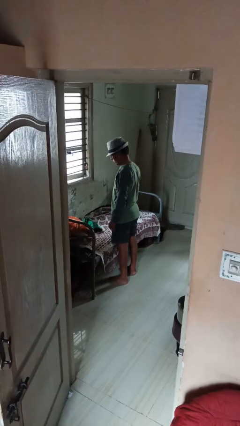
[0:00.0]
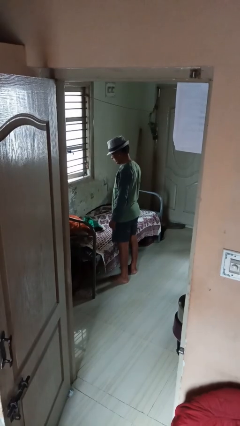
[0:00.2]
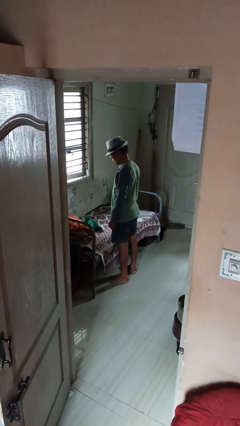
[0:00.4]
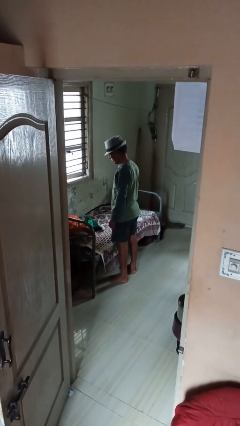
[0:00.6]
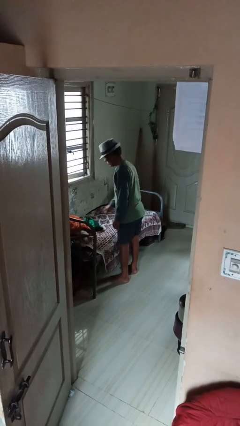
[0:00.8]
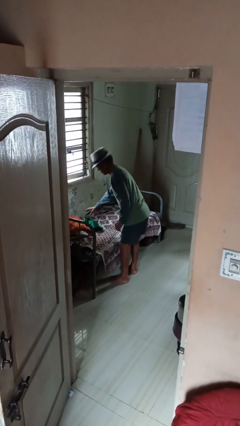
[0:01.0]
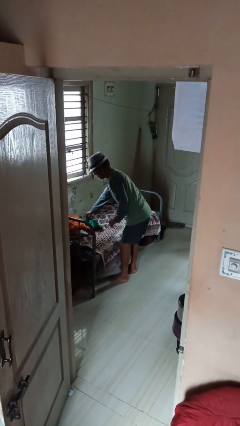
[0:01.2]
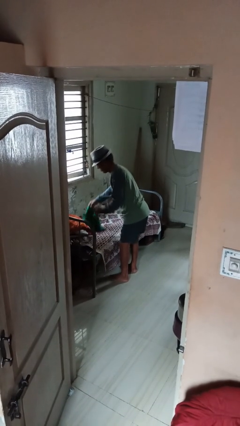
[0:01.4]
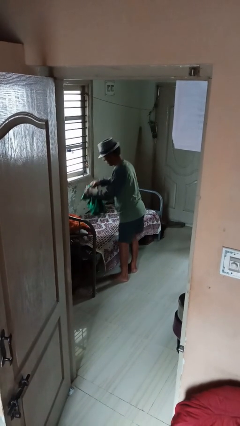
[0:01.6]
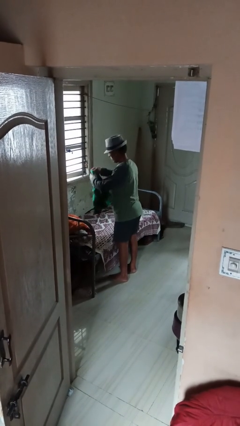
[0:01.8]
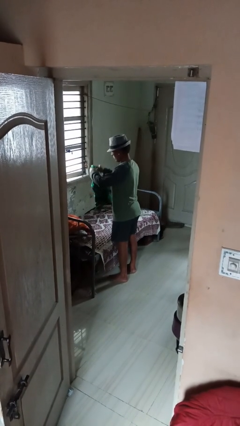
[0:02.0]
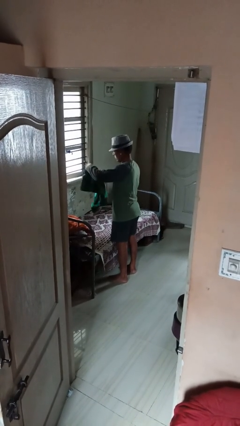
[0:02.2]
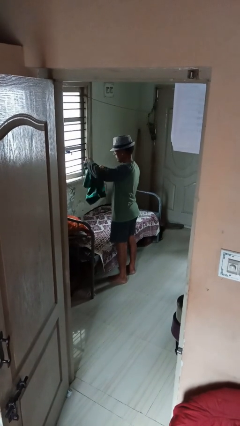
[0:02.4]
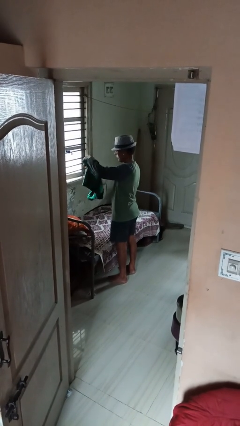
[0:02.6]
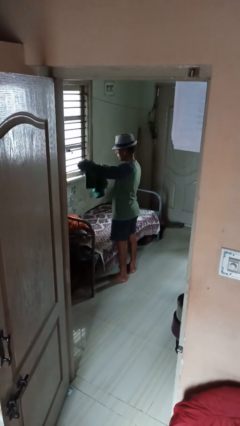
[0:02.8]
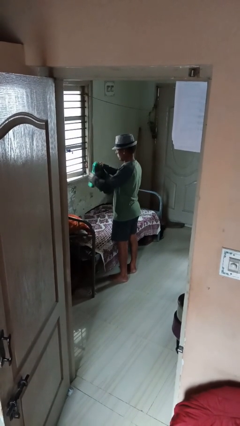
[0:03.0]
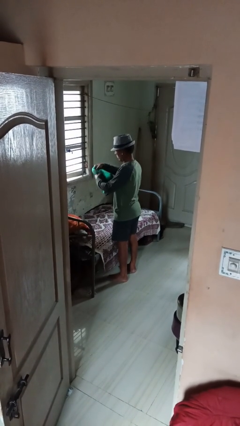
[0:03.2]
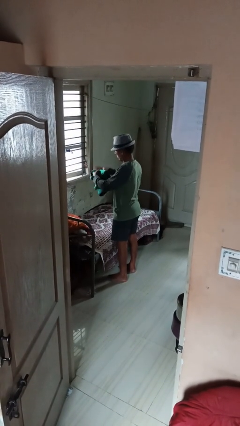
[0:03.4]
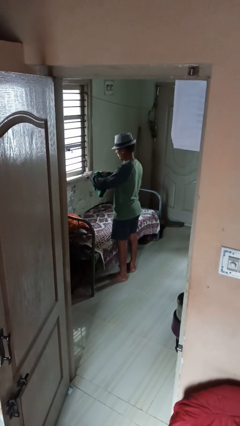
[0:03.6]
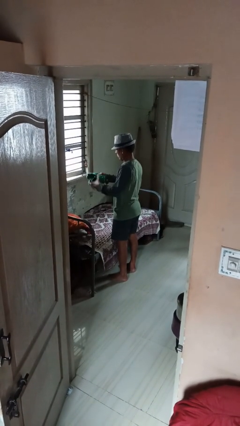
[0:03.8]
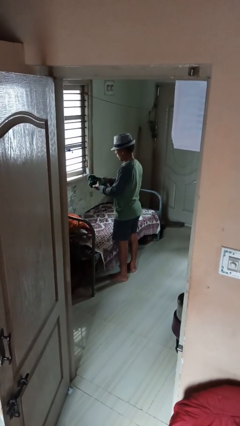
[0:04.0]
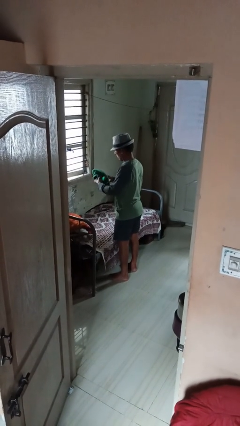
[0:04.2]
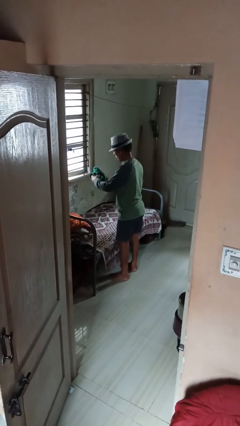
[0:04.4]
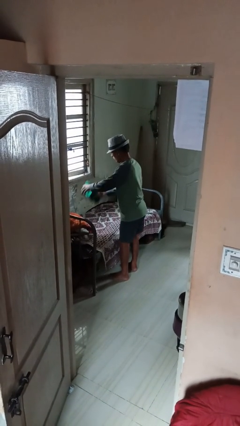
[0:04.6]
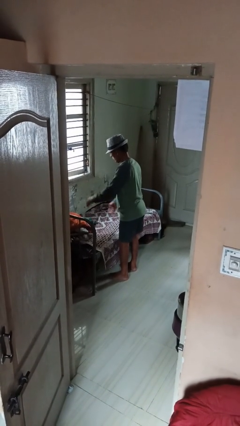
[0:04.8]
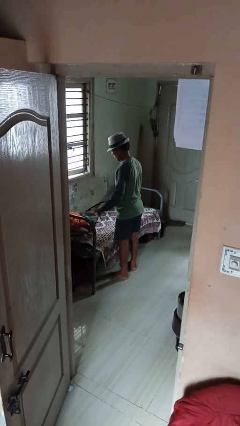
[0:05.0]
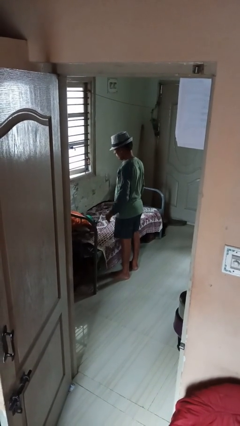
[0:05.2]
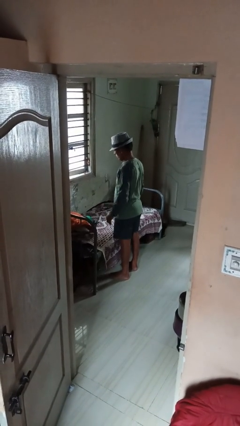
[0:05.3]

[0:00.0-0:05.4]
person folds shirt

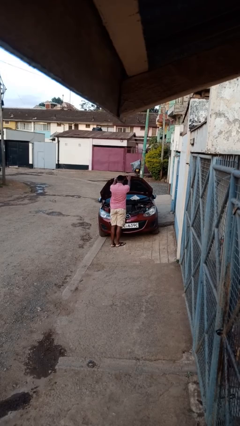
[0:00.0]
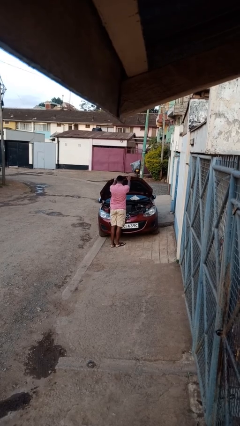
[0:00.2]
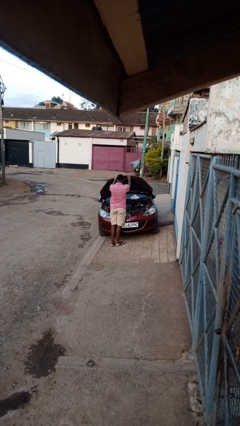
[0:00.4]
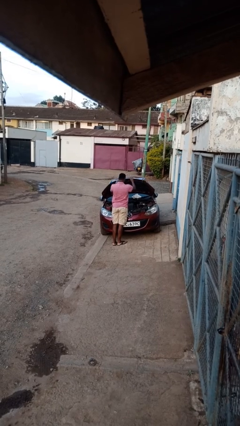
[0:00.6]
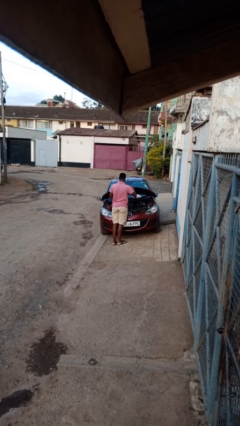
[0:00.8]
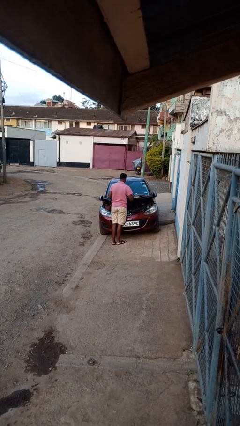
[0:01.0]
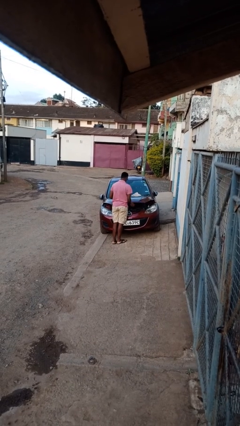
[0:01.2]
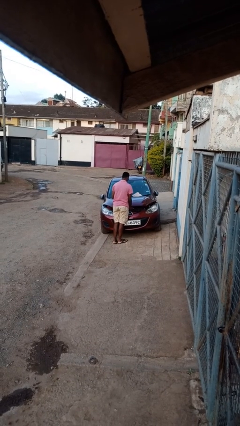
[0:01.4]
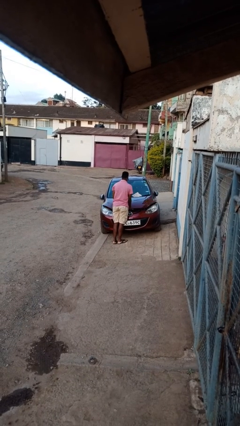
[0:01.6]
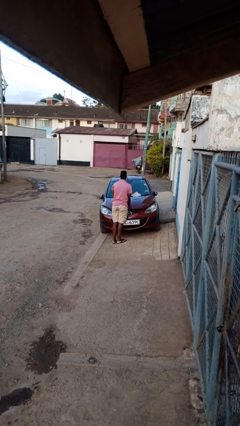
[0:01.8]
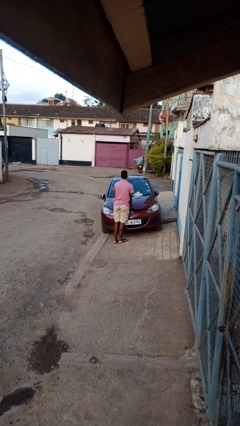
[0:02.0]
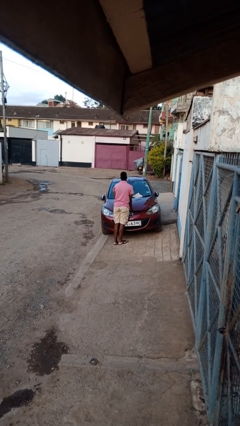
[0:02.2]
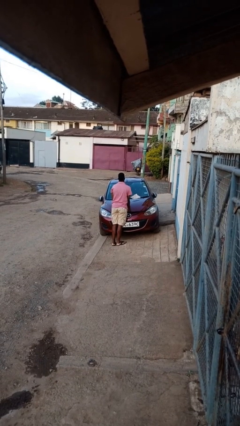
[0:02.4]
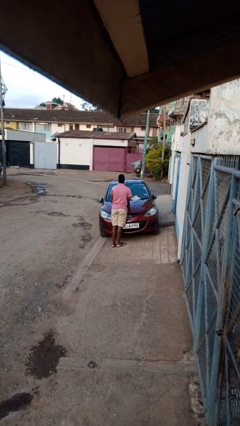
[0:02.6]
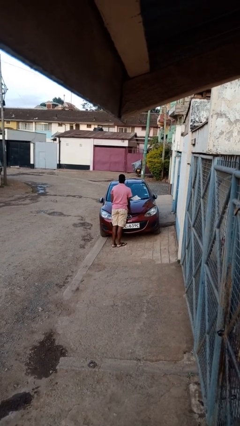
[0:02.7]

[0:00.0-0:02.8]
person closes car hood

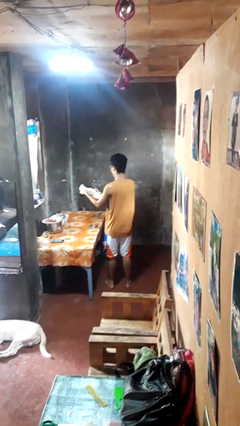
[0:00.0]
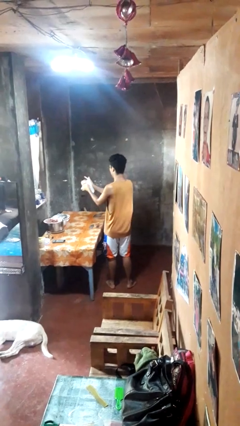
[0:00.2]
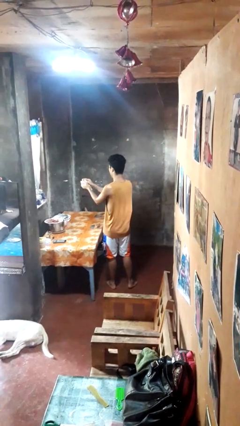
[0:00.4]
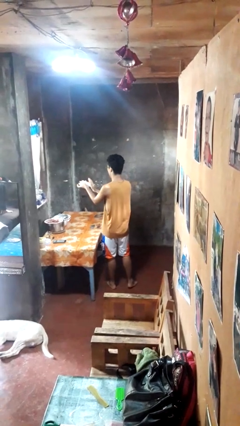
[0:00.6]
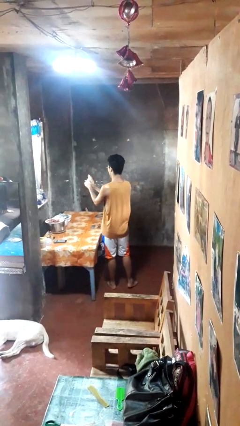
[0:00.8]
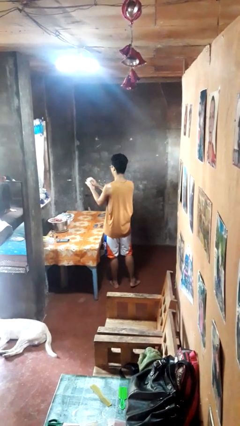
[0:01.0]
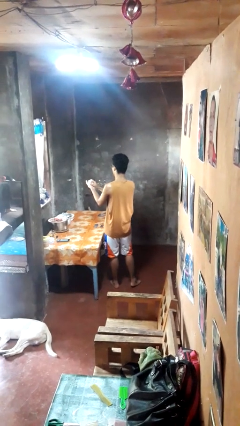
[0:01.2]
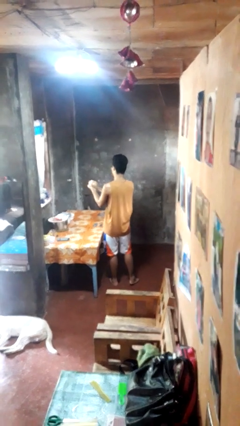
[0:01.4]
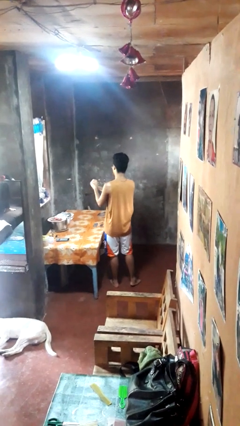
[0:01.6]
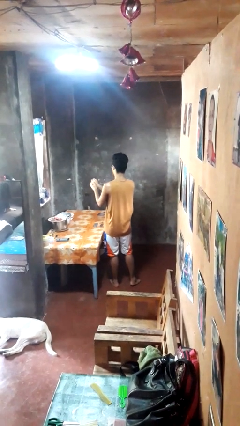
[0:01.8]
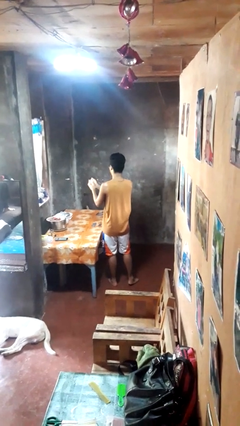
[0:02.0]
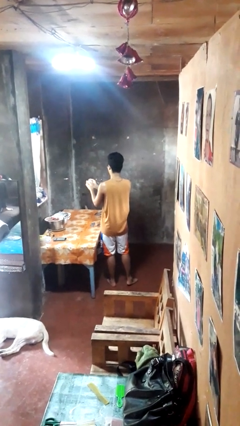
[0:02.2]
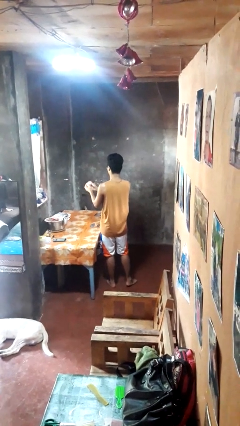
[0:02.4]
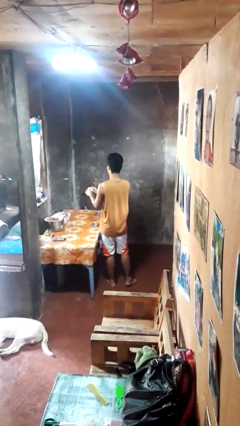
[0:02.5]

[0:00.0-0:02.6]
person crumples paper

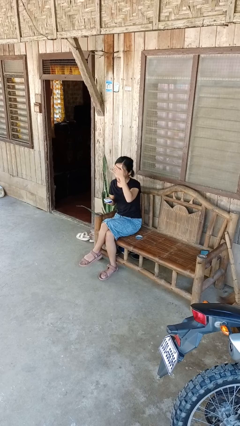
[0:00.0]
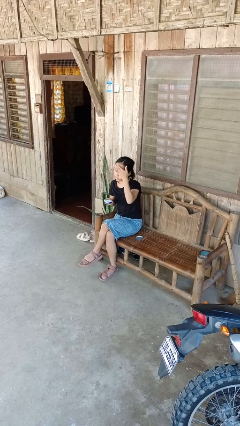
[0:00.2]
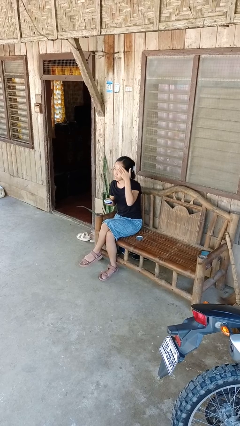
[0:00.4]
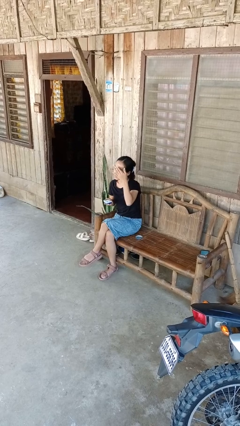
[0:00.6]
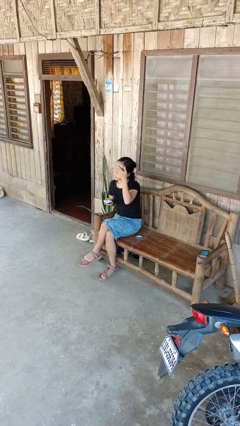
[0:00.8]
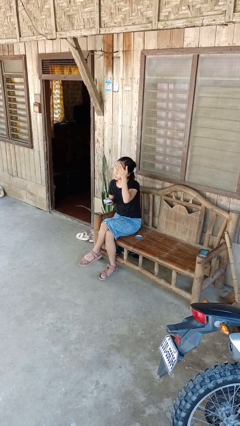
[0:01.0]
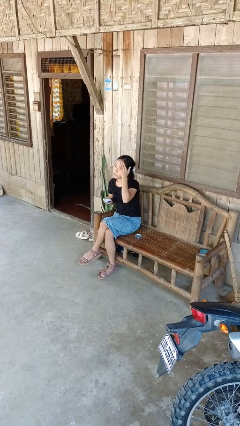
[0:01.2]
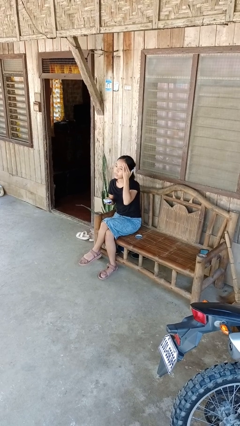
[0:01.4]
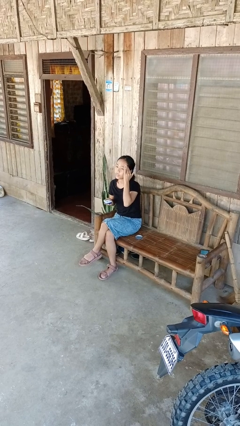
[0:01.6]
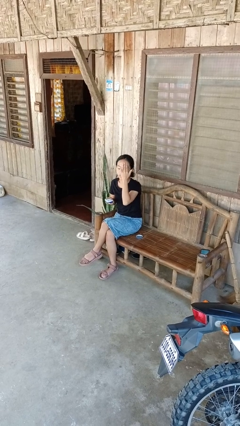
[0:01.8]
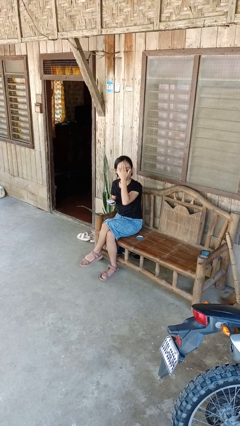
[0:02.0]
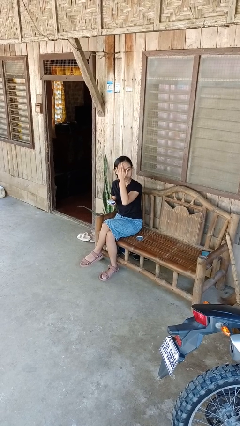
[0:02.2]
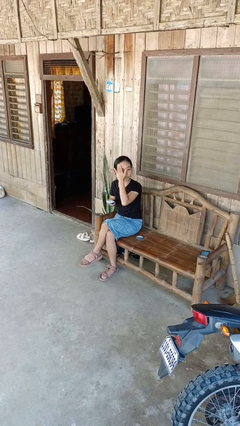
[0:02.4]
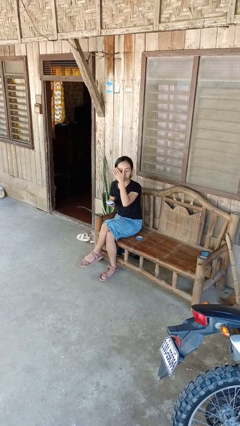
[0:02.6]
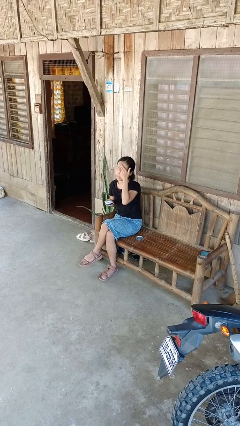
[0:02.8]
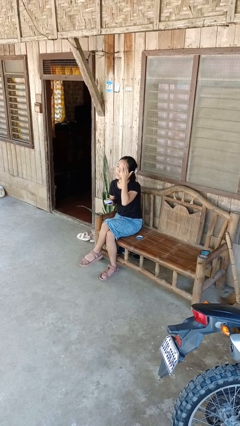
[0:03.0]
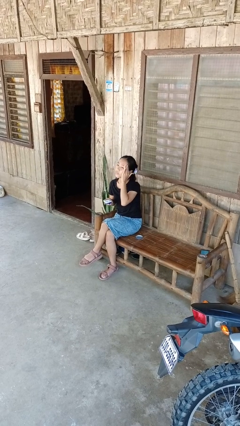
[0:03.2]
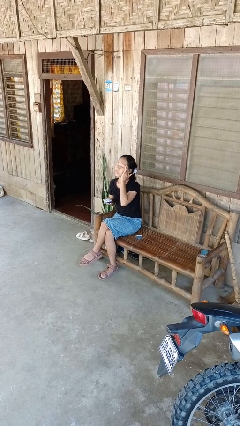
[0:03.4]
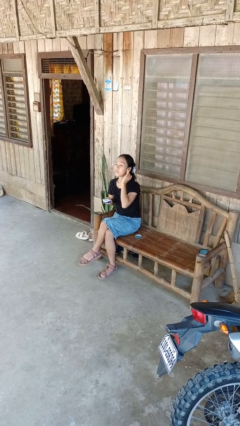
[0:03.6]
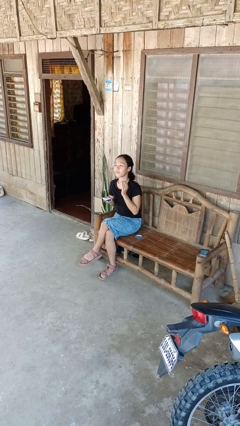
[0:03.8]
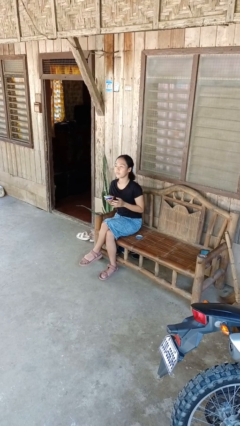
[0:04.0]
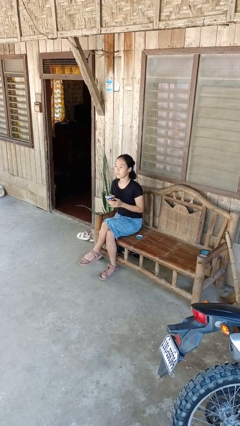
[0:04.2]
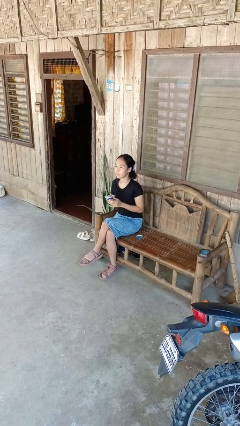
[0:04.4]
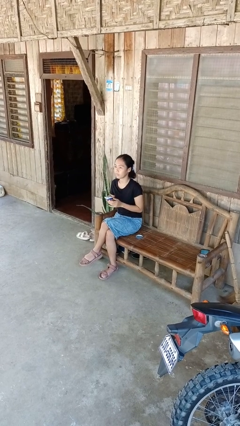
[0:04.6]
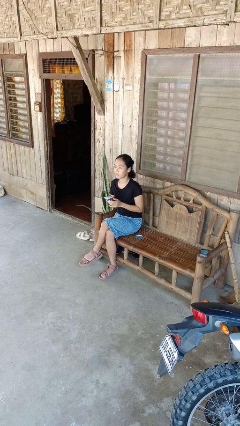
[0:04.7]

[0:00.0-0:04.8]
person applies facial moisturizer

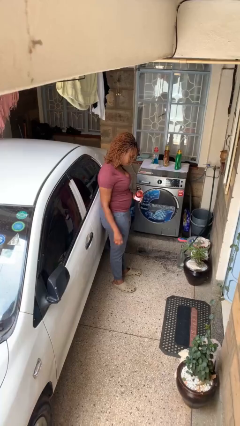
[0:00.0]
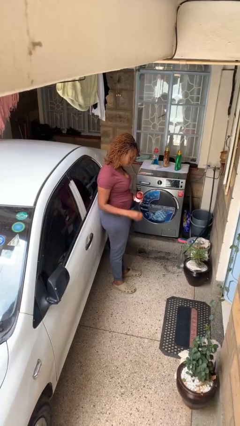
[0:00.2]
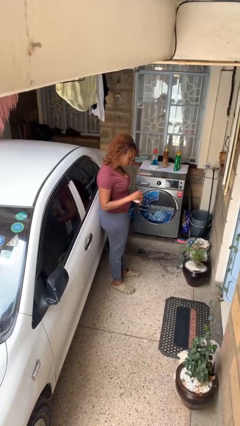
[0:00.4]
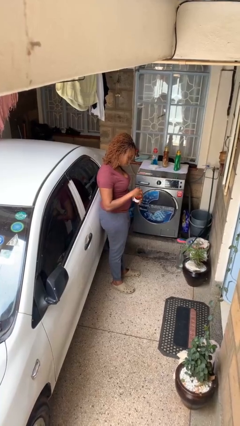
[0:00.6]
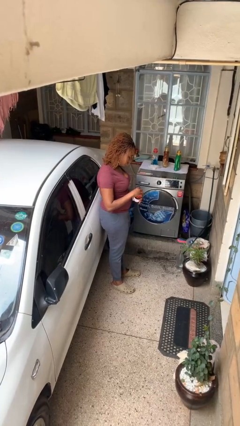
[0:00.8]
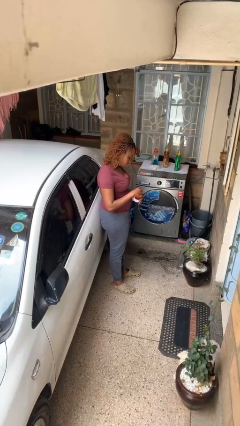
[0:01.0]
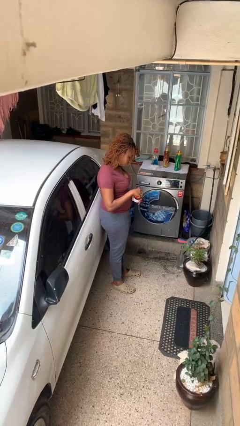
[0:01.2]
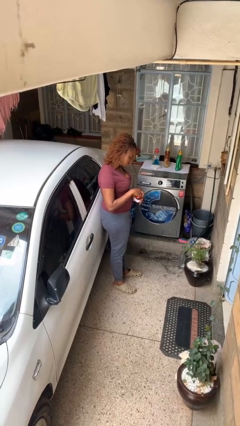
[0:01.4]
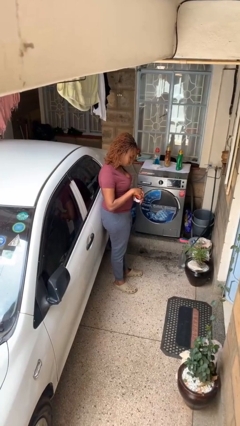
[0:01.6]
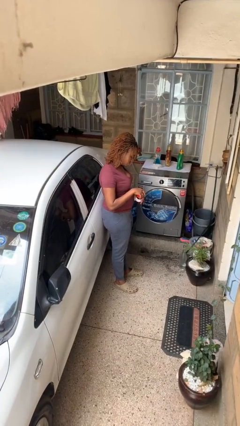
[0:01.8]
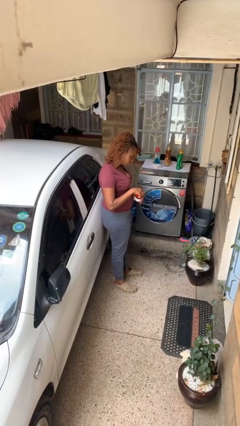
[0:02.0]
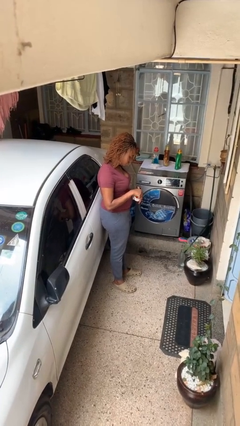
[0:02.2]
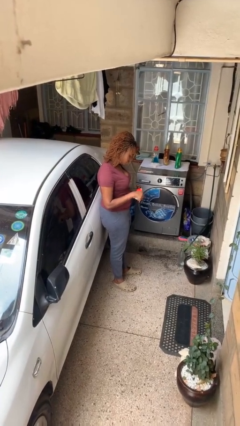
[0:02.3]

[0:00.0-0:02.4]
person closes jar
